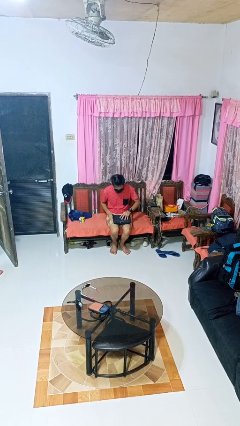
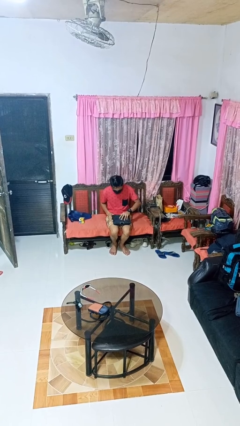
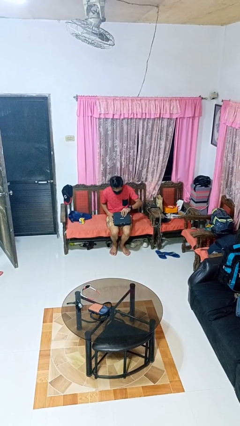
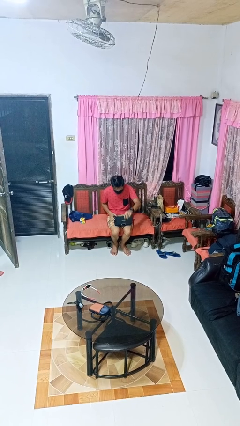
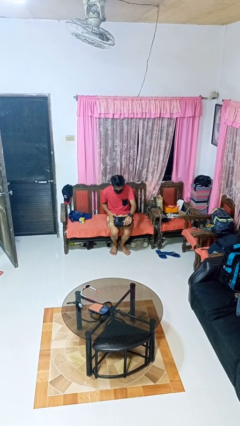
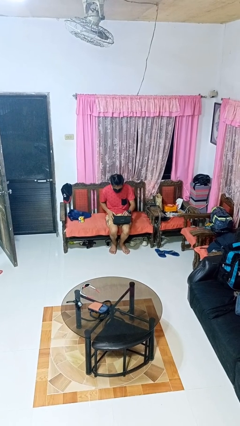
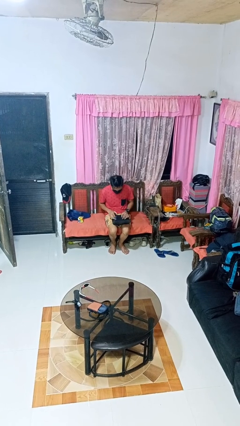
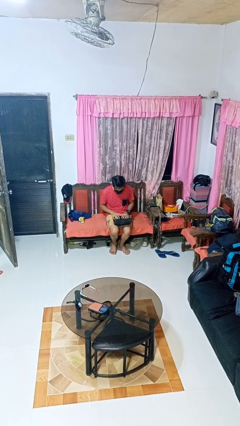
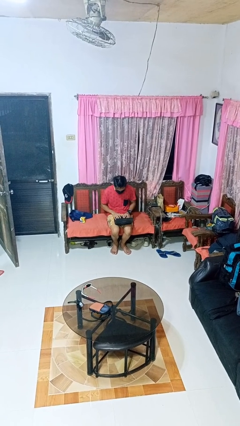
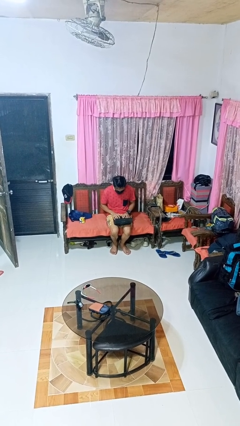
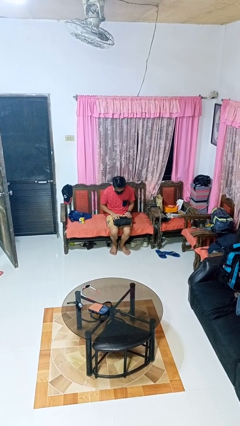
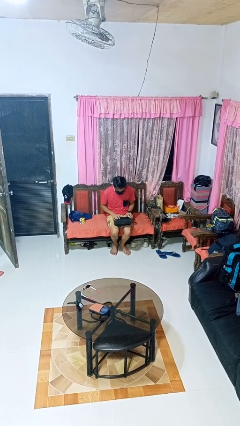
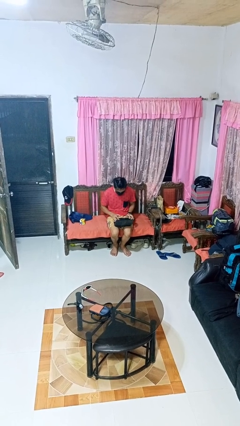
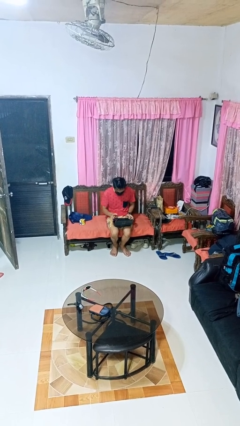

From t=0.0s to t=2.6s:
person opens laptop

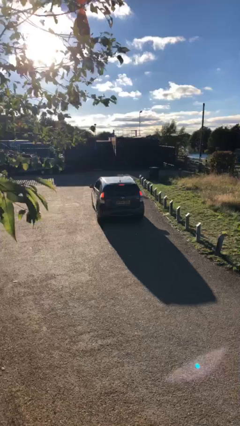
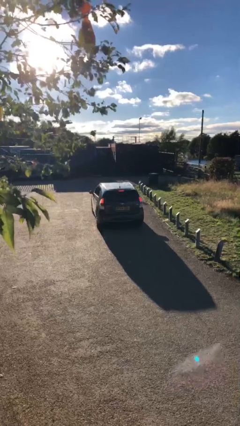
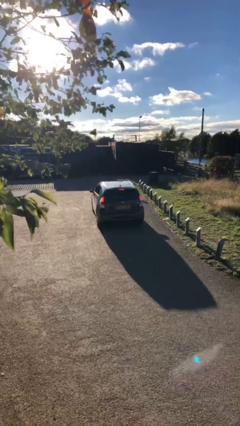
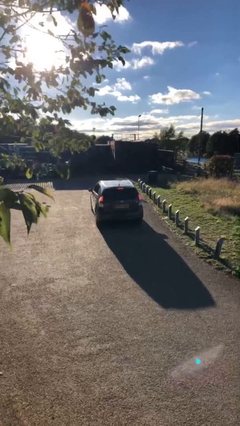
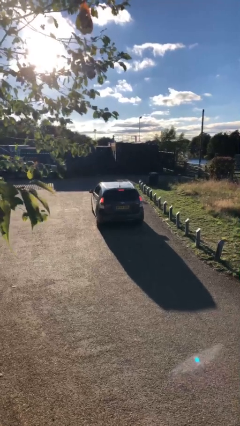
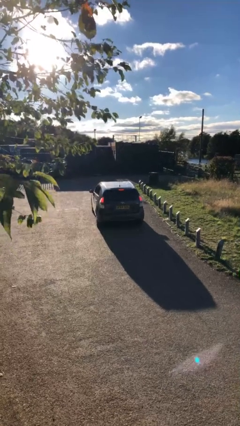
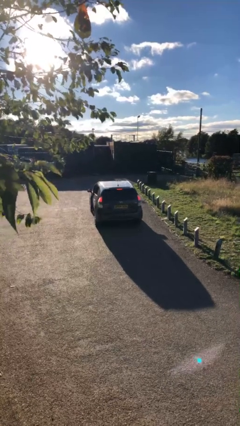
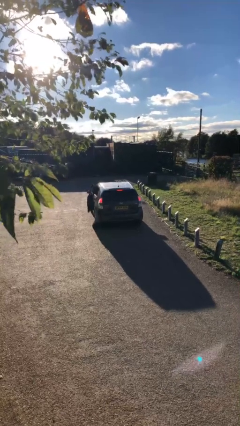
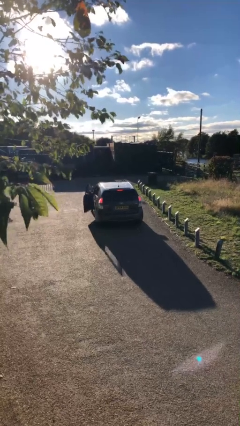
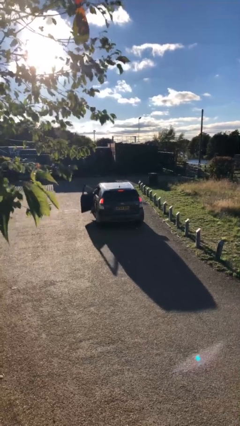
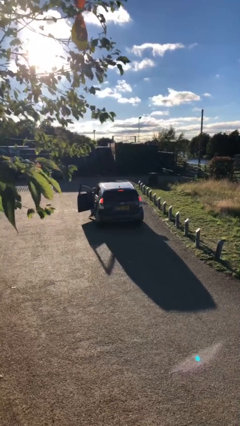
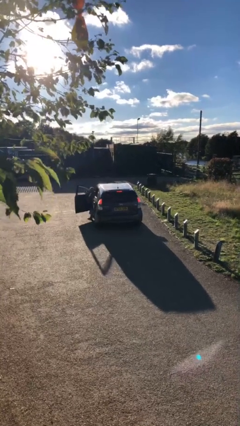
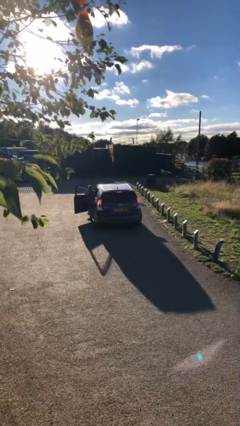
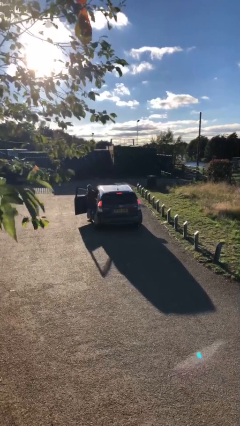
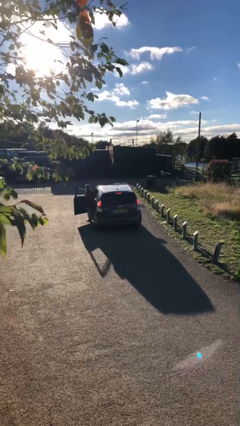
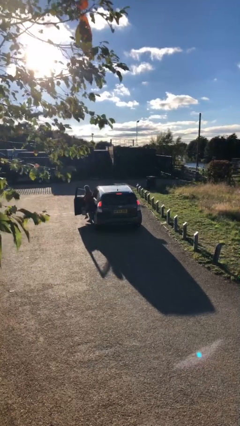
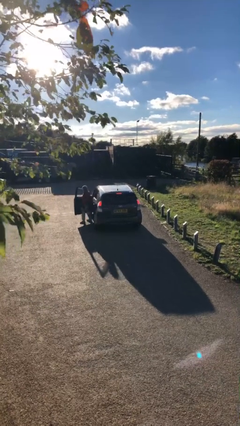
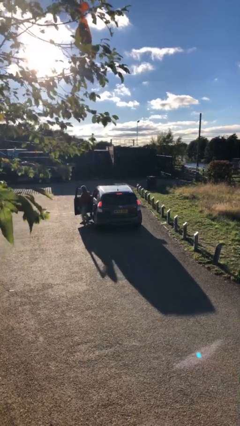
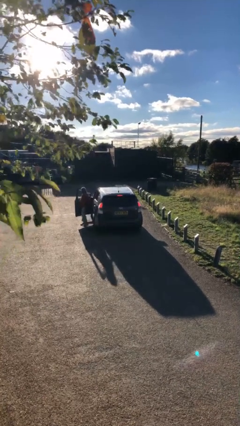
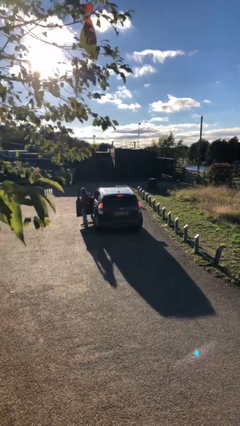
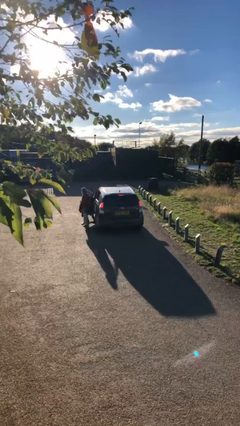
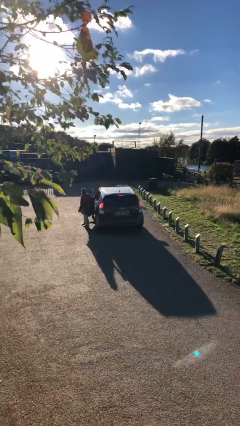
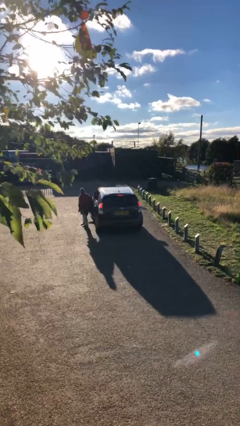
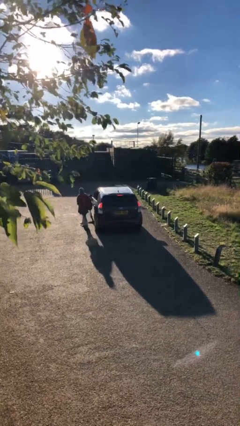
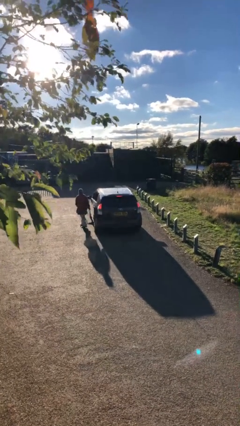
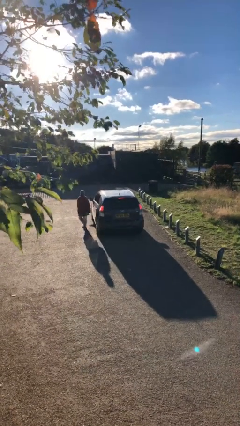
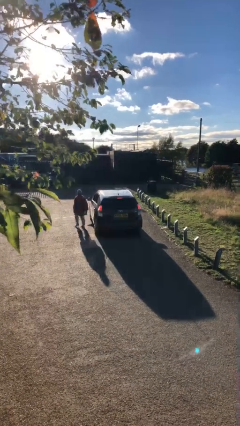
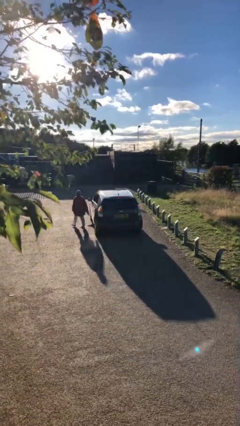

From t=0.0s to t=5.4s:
car drops off person

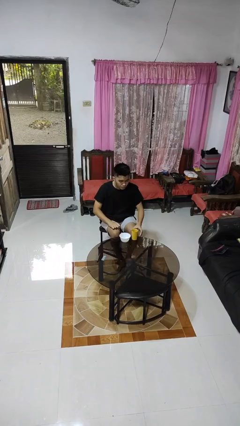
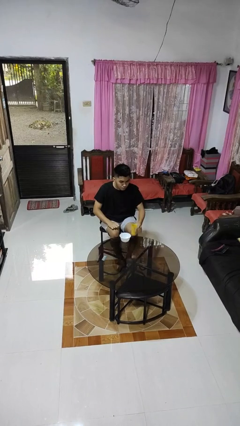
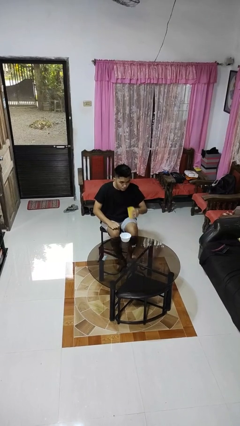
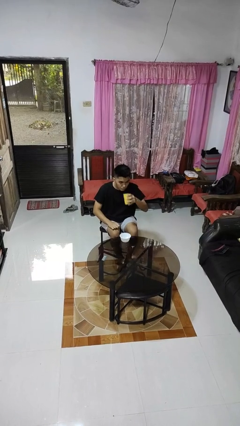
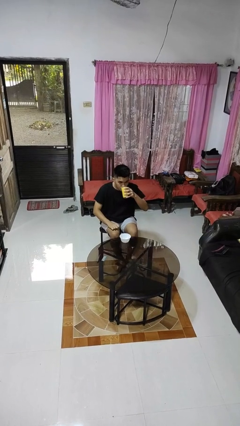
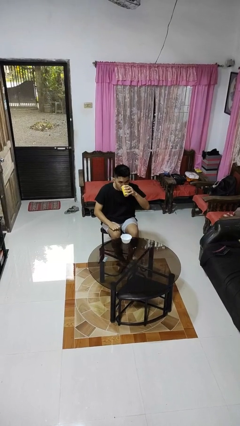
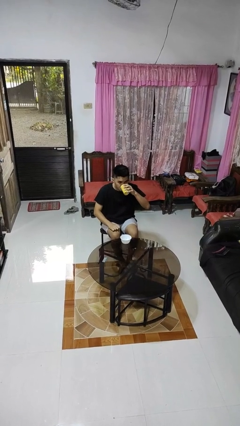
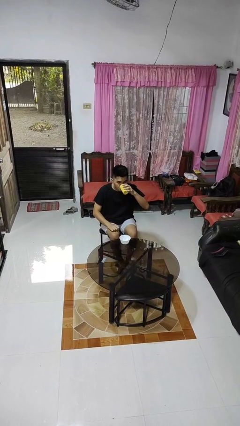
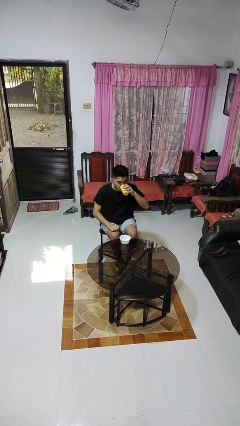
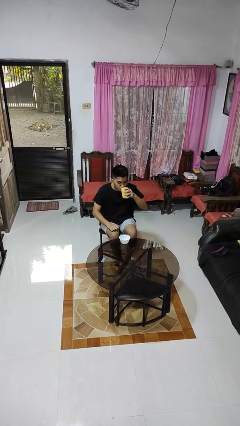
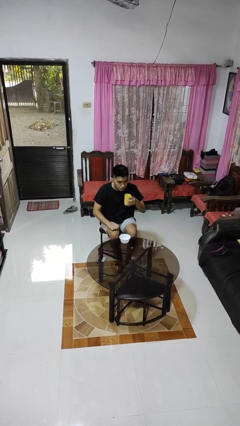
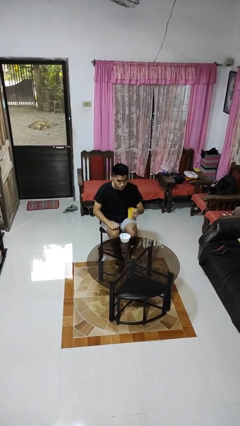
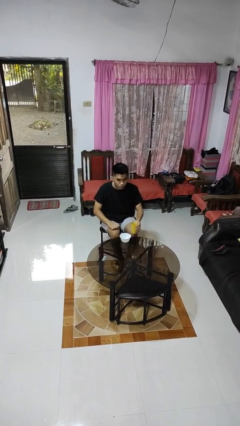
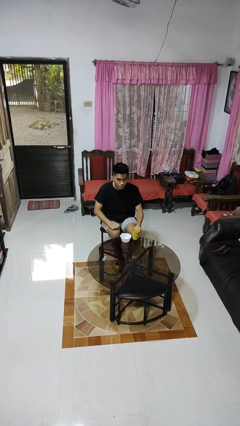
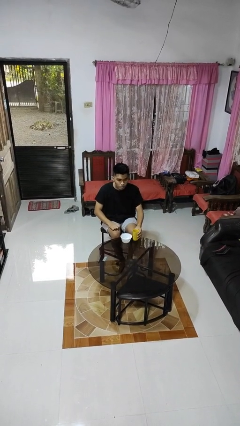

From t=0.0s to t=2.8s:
person drinks from cup

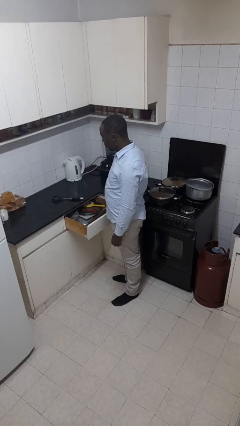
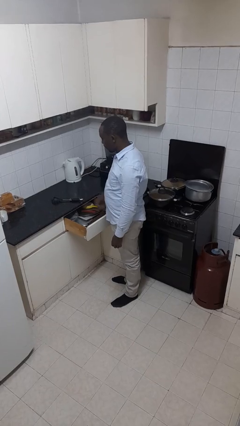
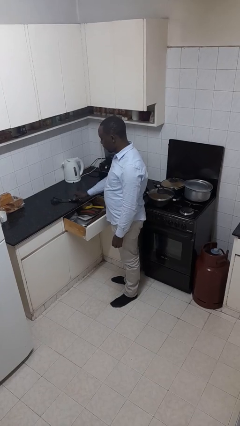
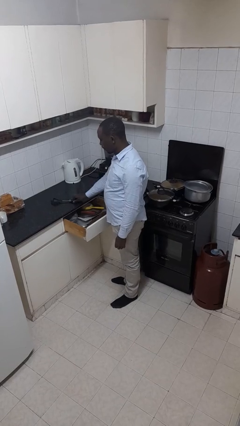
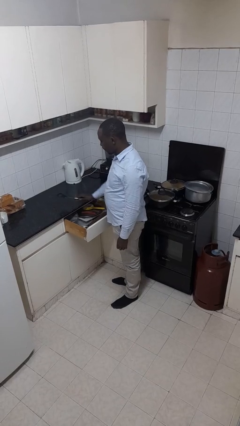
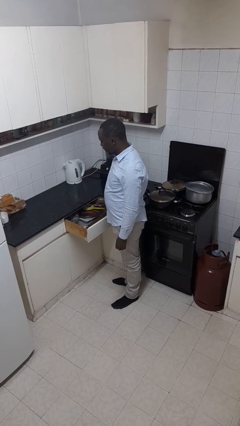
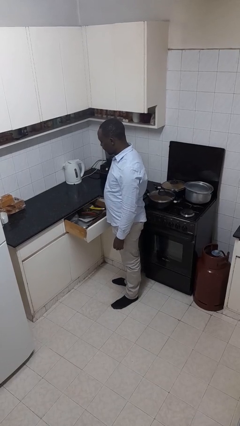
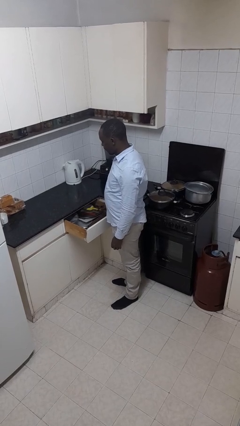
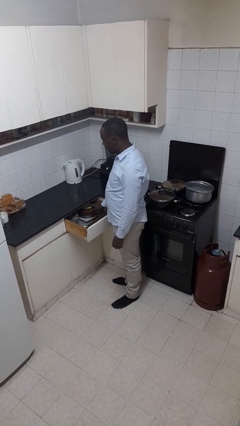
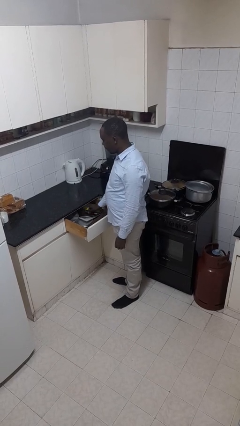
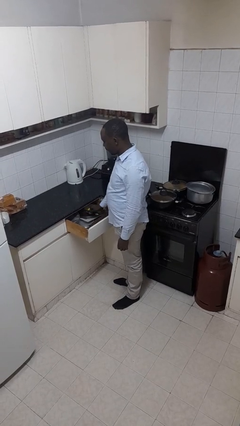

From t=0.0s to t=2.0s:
person puts object into kitchen drawer

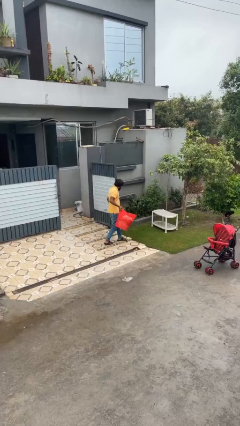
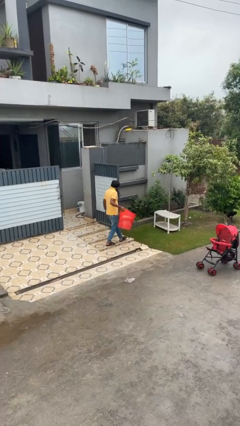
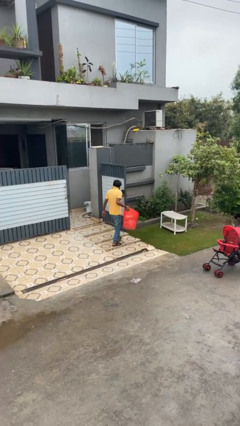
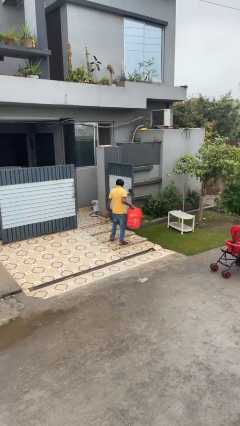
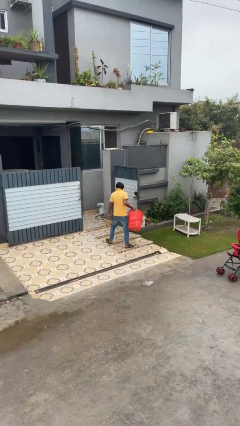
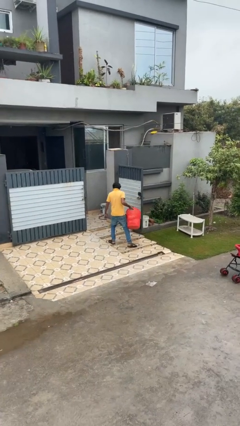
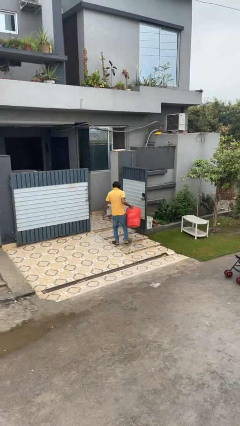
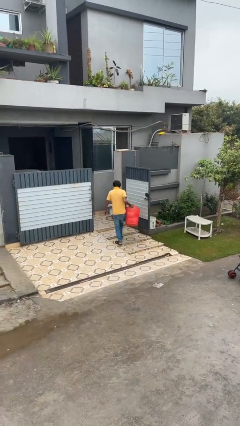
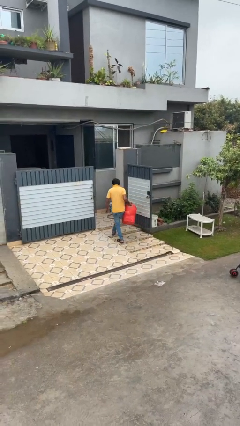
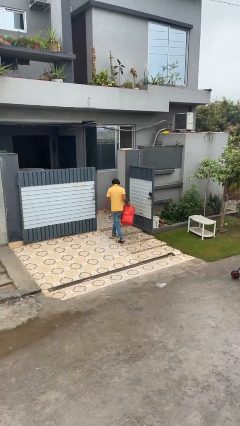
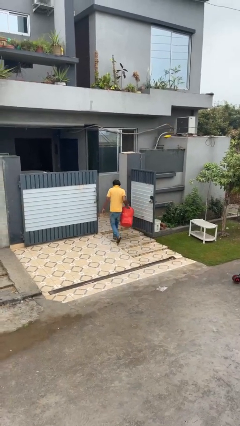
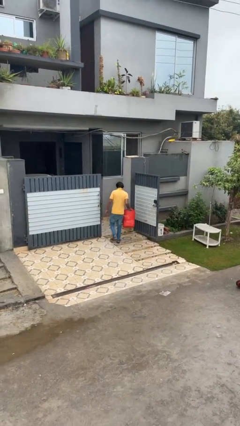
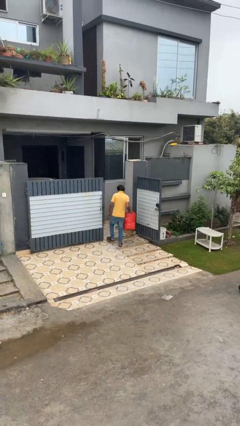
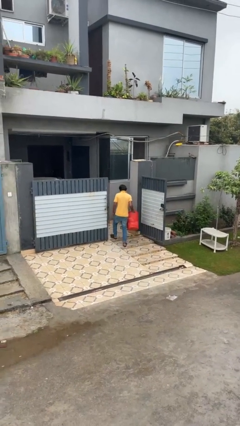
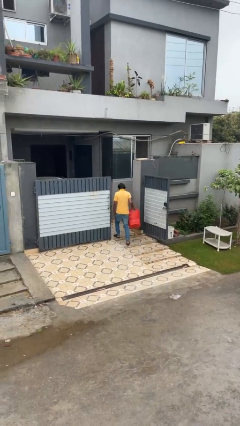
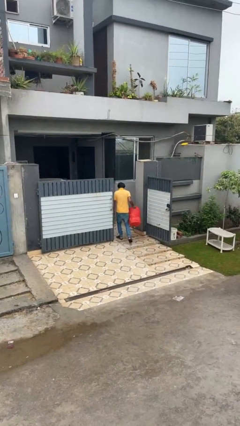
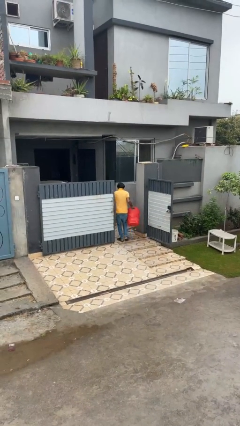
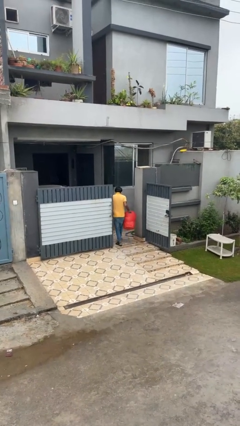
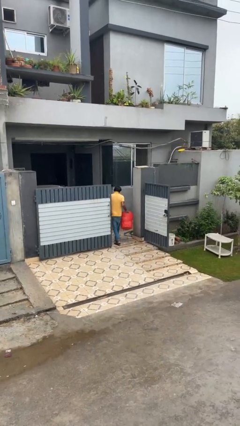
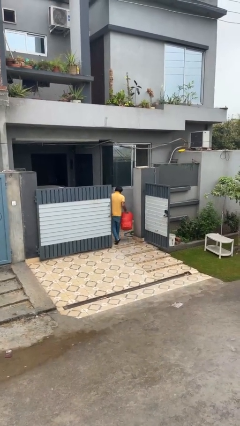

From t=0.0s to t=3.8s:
person carries laundry basket

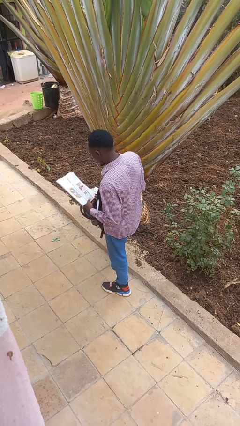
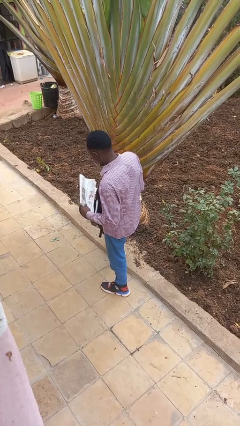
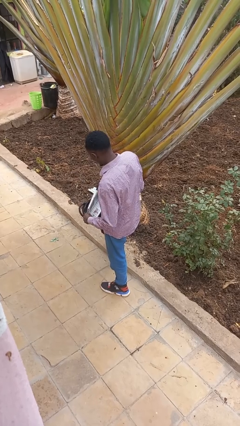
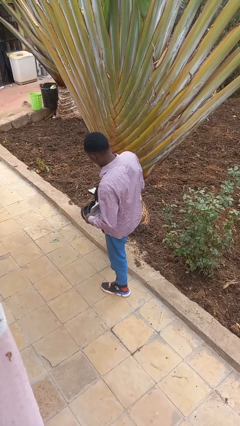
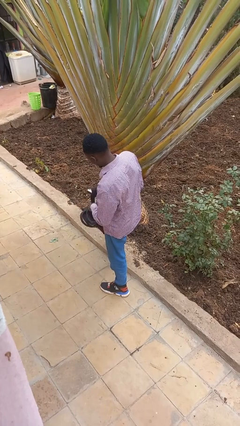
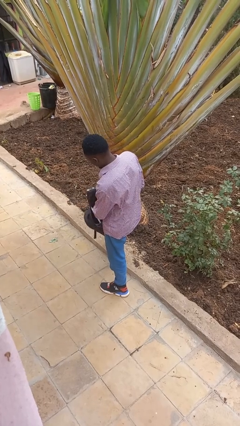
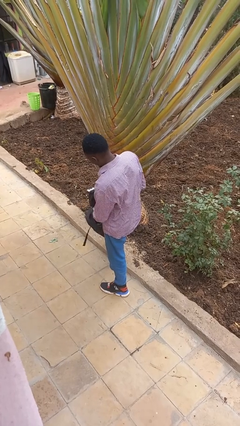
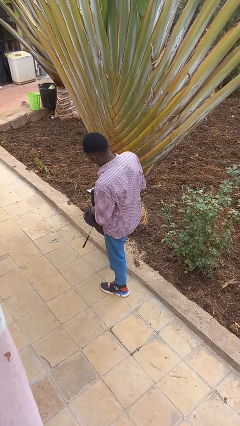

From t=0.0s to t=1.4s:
person puts object into backpack
